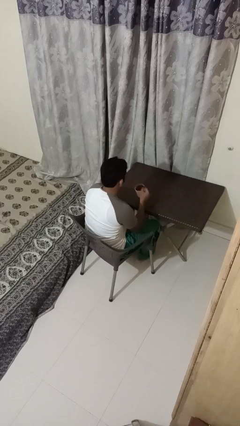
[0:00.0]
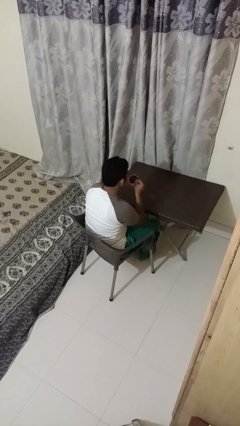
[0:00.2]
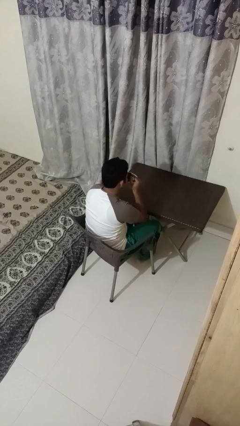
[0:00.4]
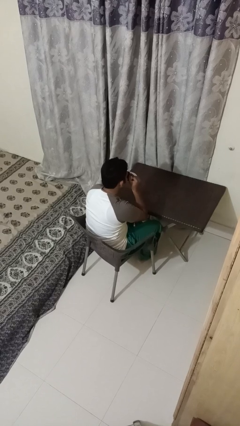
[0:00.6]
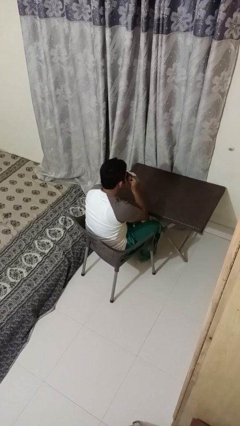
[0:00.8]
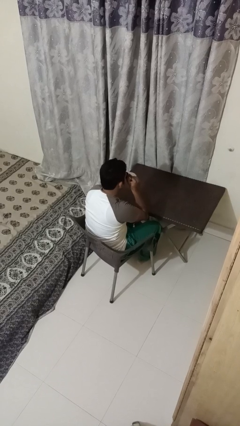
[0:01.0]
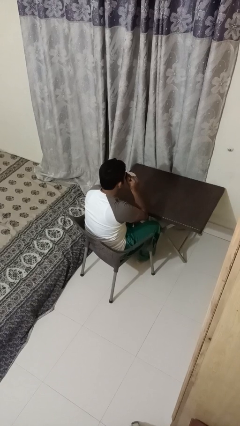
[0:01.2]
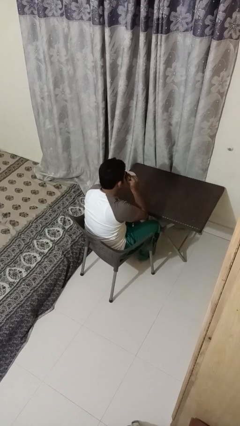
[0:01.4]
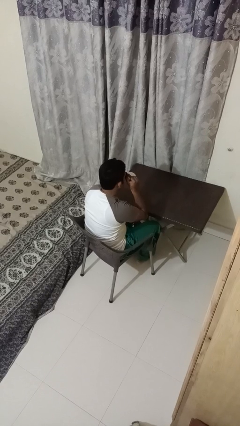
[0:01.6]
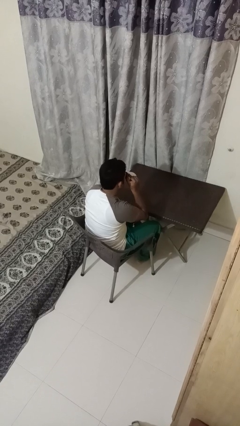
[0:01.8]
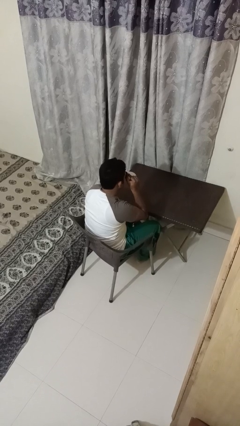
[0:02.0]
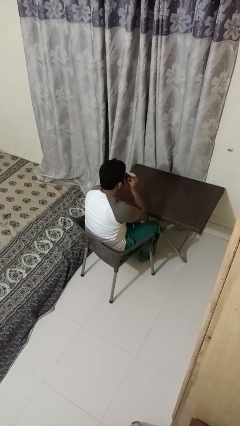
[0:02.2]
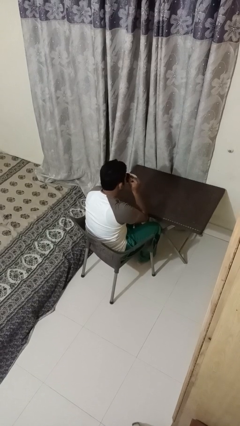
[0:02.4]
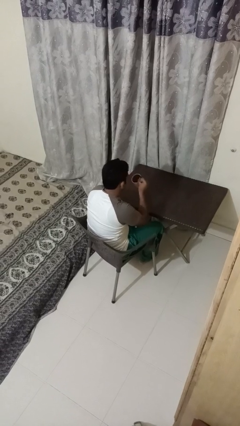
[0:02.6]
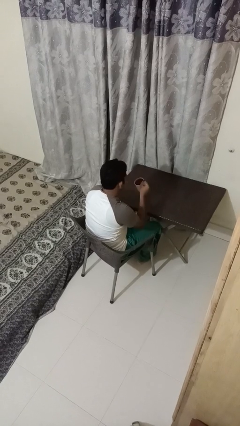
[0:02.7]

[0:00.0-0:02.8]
person drinks from mug

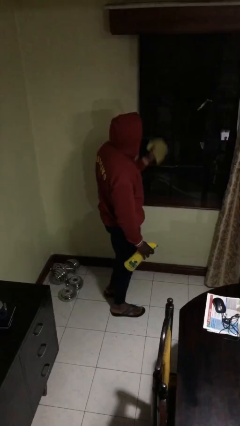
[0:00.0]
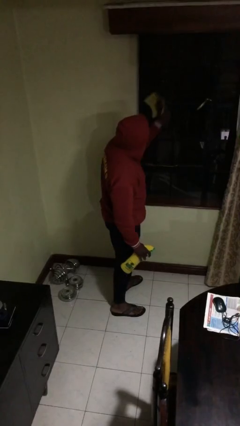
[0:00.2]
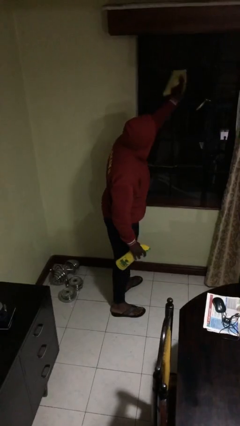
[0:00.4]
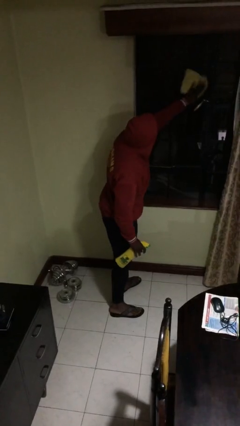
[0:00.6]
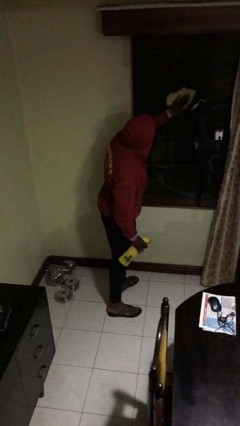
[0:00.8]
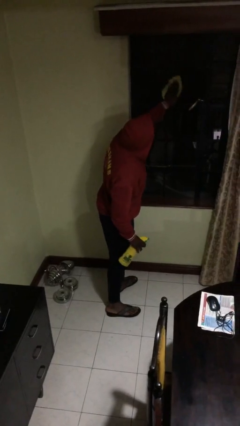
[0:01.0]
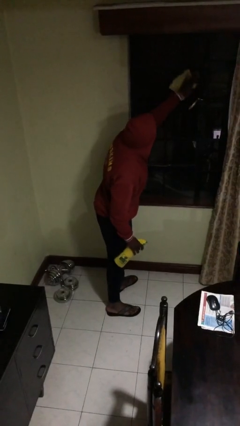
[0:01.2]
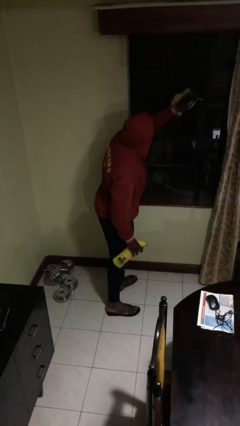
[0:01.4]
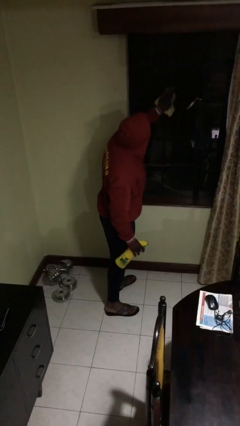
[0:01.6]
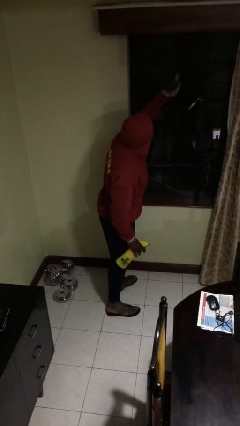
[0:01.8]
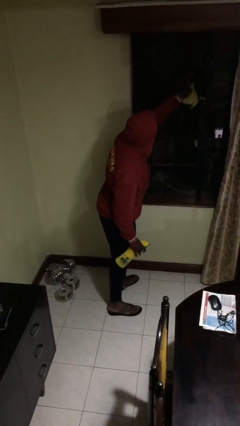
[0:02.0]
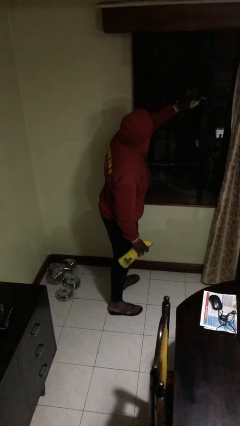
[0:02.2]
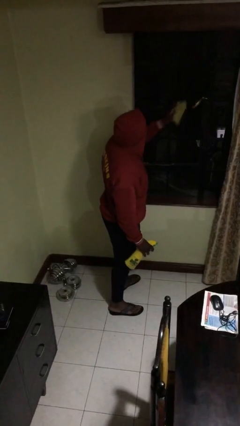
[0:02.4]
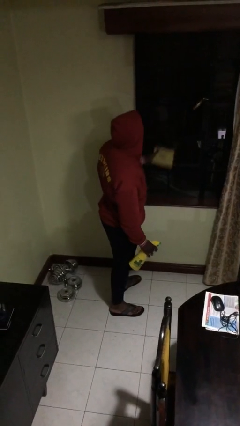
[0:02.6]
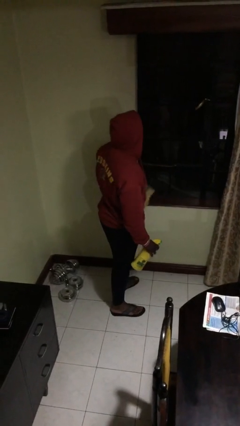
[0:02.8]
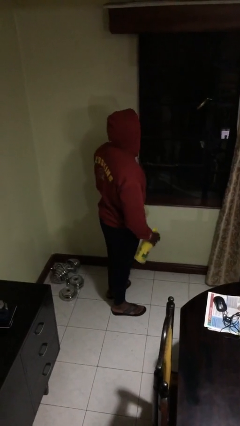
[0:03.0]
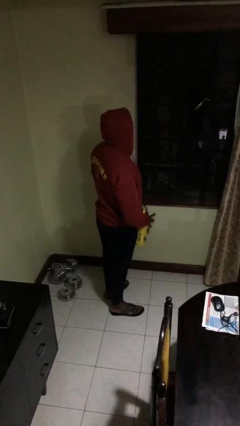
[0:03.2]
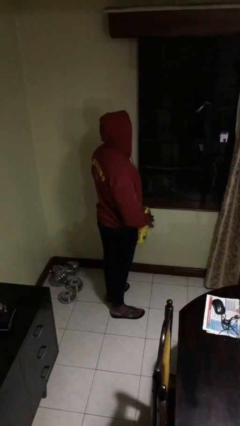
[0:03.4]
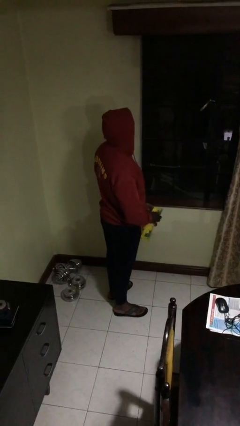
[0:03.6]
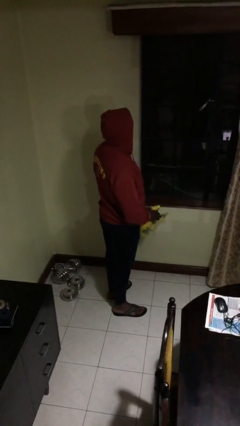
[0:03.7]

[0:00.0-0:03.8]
person washes window

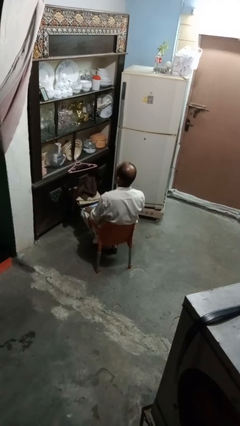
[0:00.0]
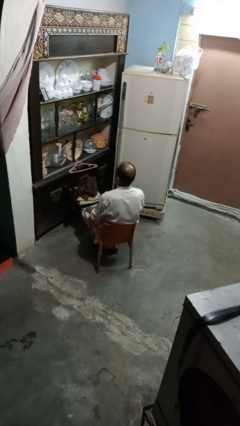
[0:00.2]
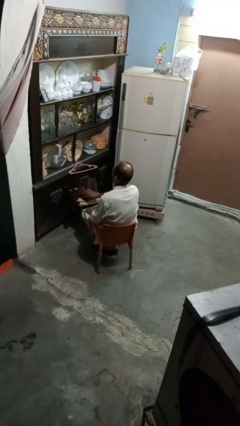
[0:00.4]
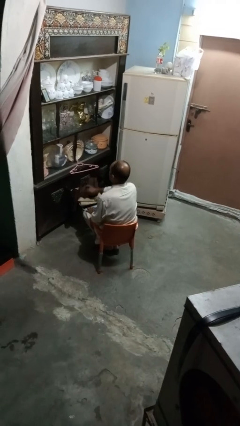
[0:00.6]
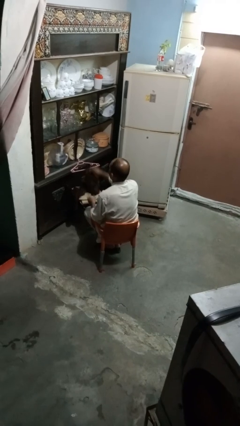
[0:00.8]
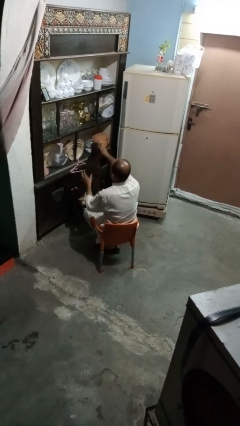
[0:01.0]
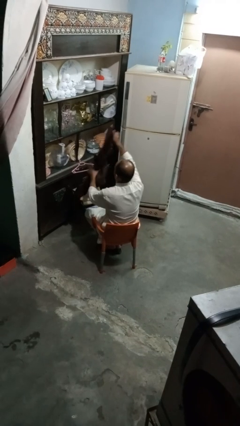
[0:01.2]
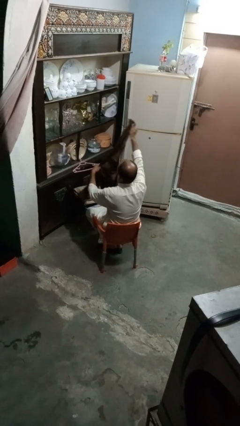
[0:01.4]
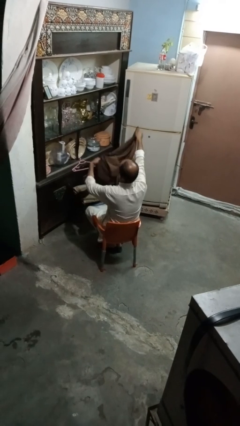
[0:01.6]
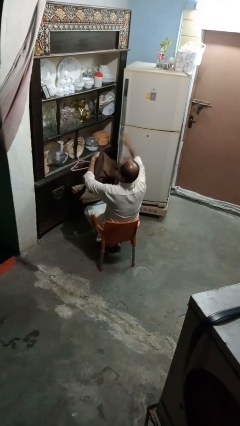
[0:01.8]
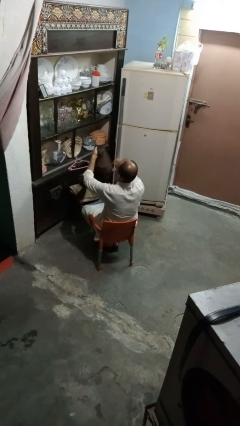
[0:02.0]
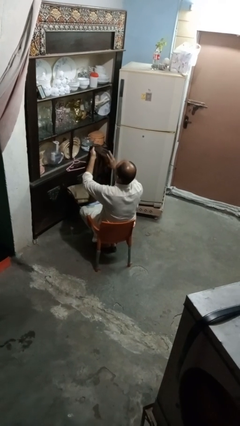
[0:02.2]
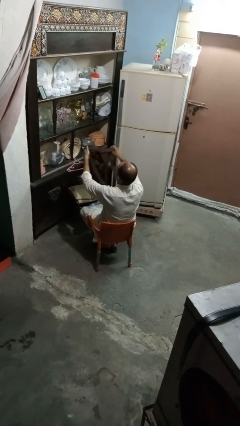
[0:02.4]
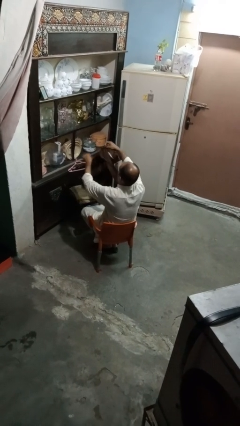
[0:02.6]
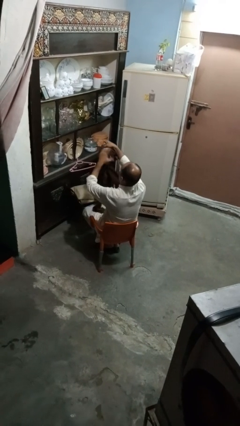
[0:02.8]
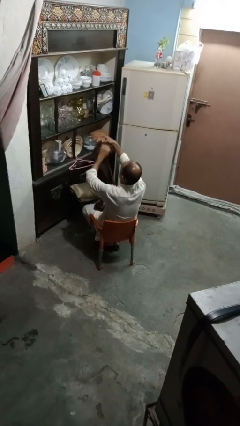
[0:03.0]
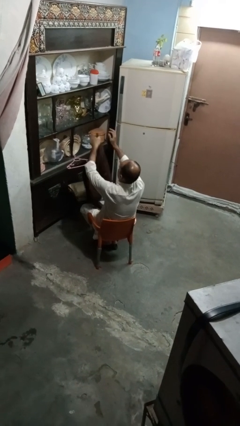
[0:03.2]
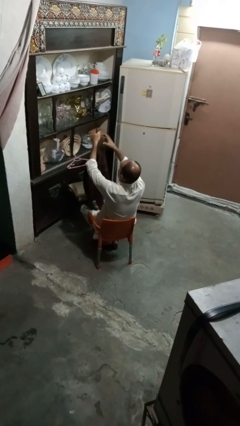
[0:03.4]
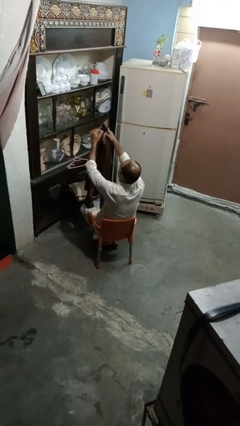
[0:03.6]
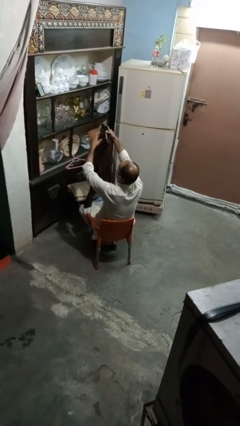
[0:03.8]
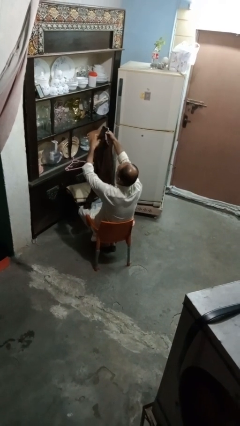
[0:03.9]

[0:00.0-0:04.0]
person folds shirt

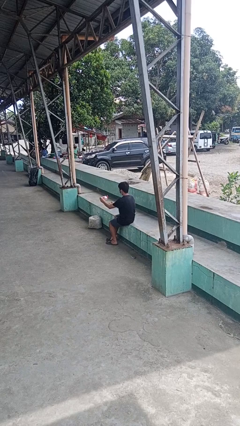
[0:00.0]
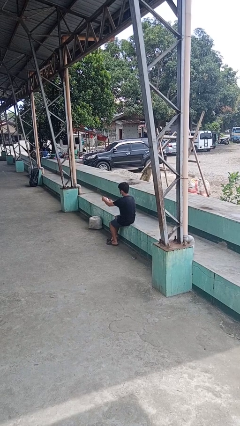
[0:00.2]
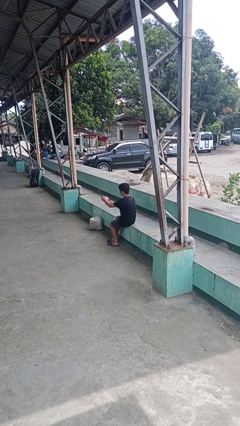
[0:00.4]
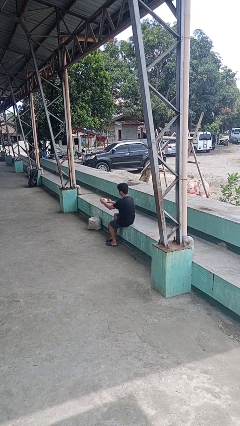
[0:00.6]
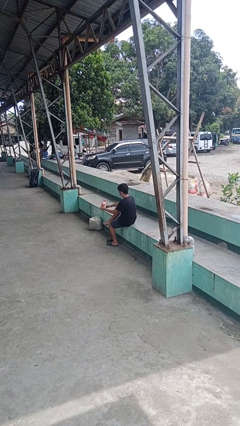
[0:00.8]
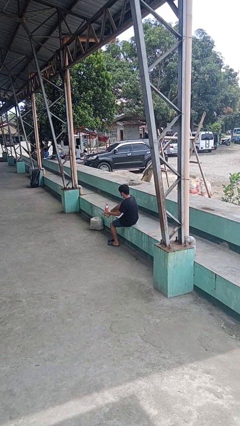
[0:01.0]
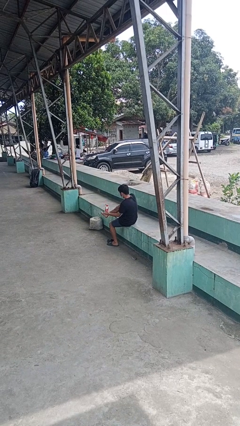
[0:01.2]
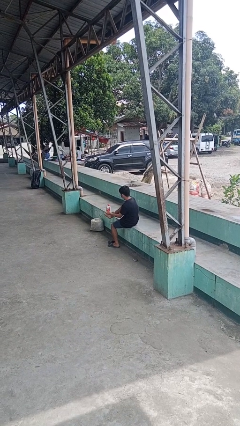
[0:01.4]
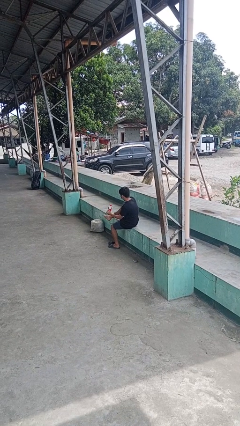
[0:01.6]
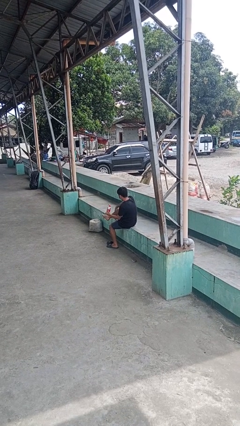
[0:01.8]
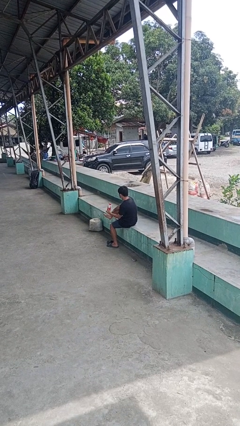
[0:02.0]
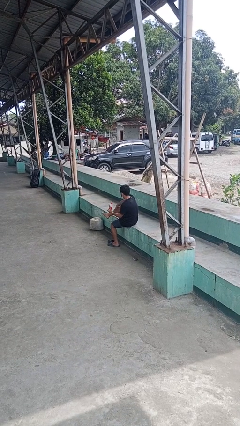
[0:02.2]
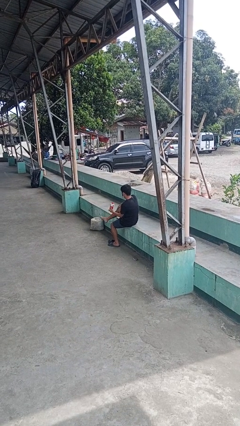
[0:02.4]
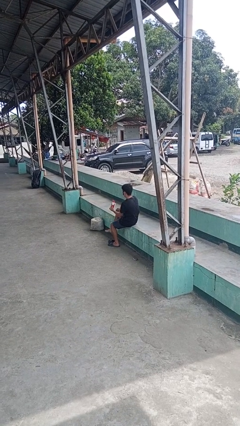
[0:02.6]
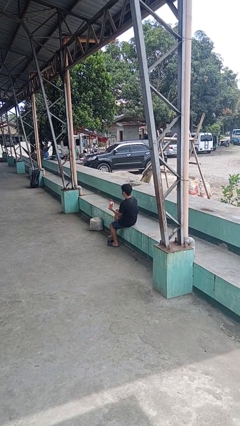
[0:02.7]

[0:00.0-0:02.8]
person applies sunscreen

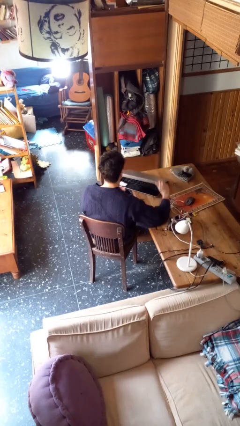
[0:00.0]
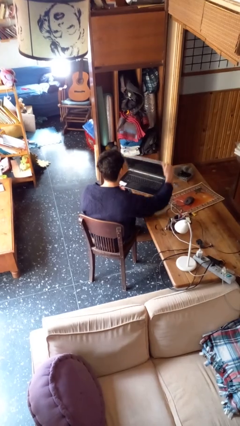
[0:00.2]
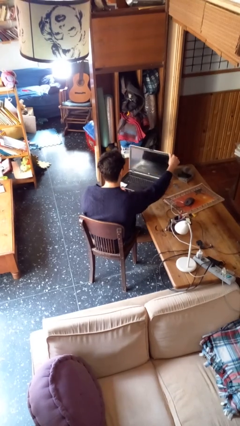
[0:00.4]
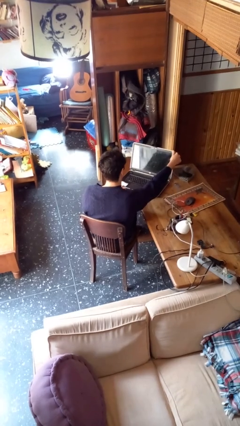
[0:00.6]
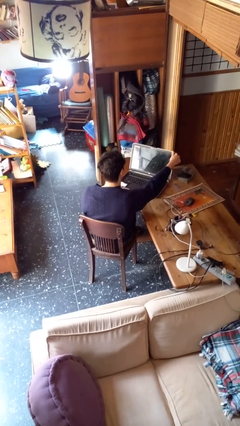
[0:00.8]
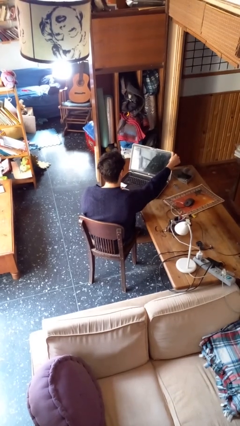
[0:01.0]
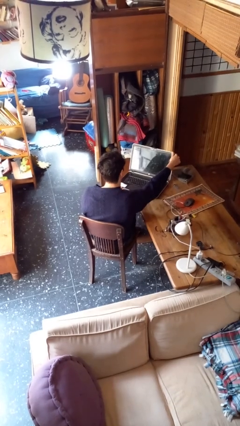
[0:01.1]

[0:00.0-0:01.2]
person opens laptop

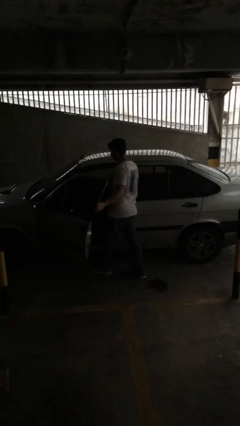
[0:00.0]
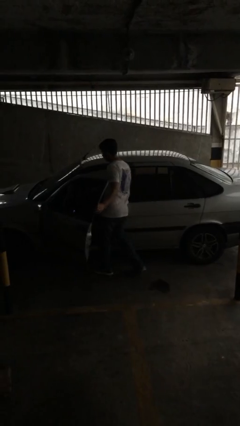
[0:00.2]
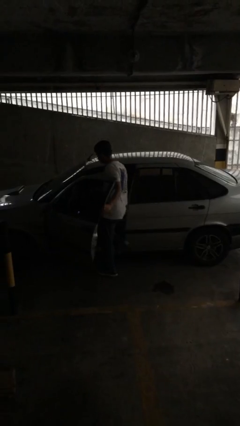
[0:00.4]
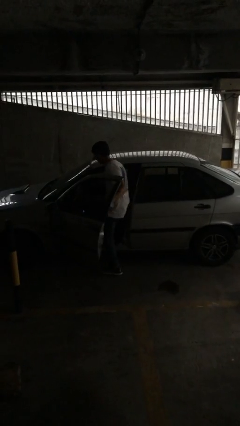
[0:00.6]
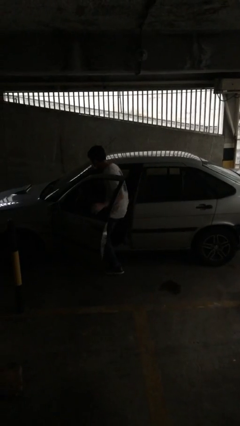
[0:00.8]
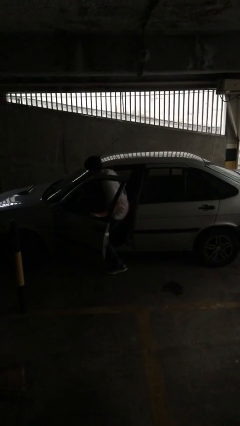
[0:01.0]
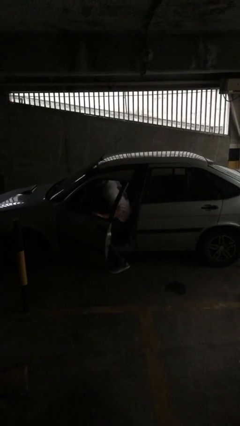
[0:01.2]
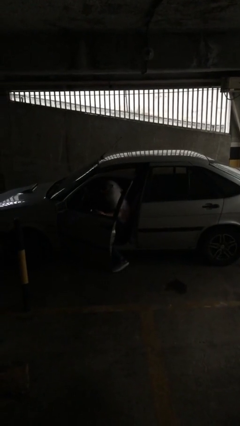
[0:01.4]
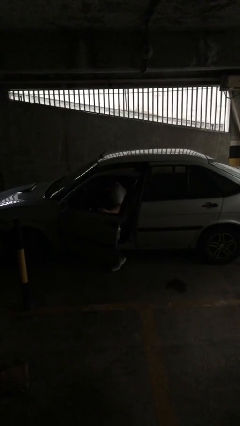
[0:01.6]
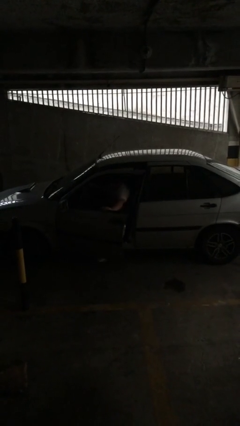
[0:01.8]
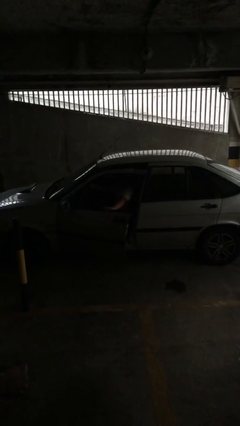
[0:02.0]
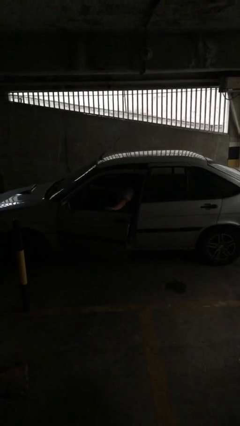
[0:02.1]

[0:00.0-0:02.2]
person enters car

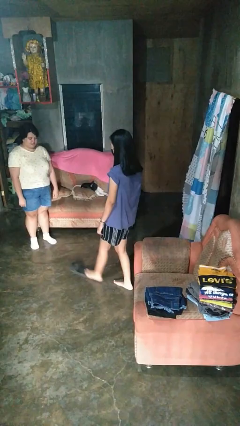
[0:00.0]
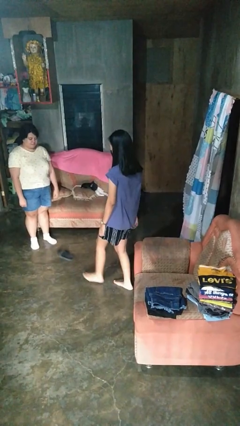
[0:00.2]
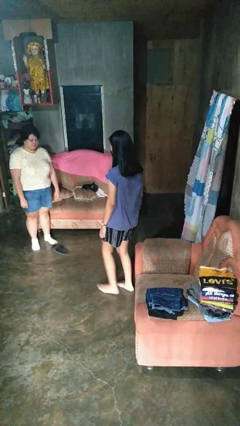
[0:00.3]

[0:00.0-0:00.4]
person kicks object to person

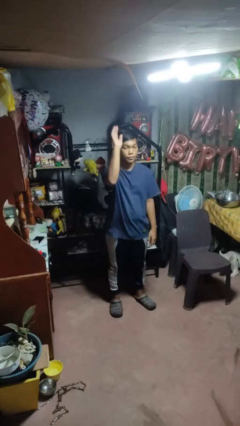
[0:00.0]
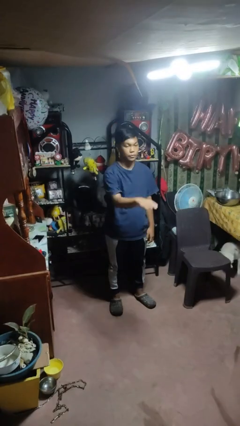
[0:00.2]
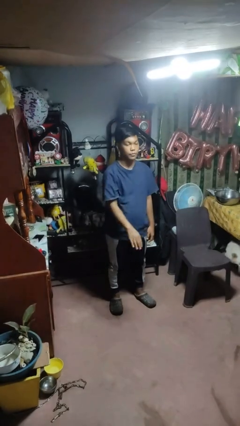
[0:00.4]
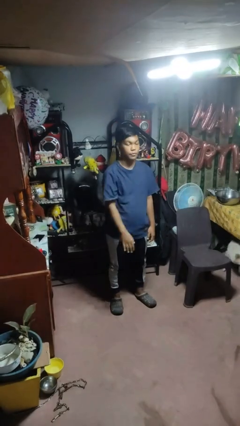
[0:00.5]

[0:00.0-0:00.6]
person gestures swipe down
